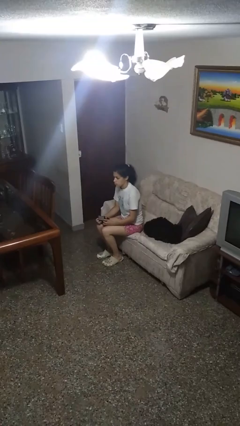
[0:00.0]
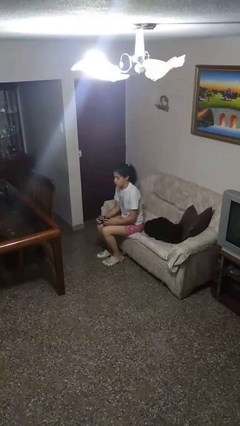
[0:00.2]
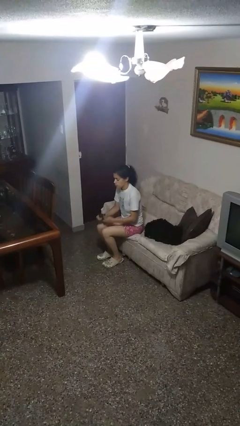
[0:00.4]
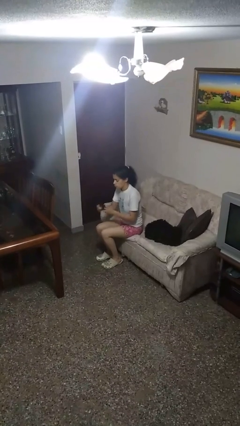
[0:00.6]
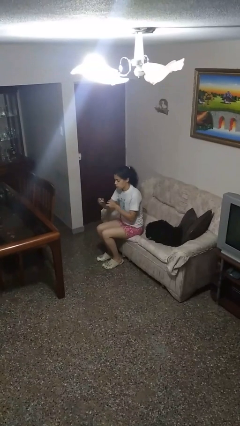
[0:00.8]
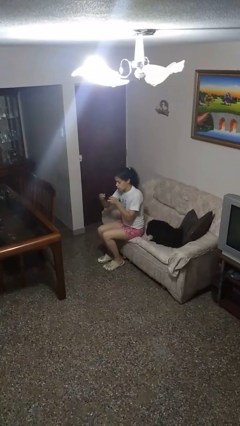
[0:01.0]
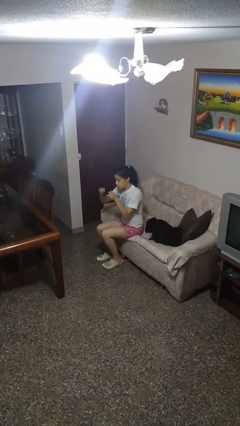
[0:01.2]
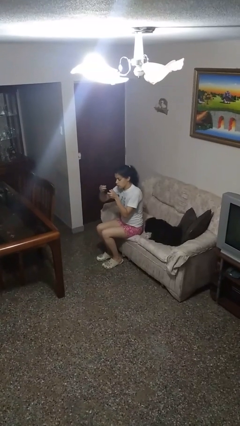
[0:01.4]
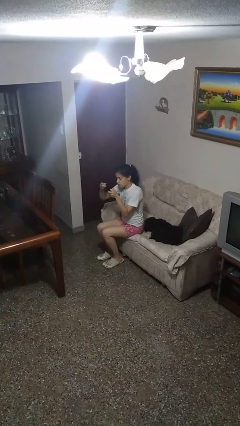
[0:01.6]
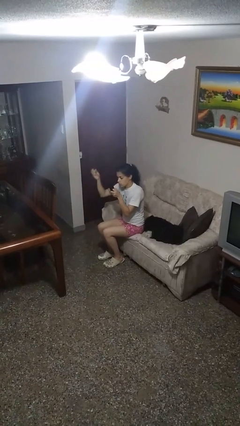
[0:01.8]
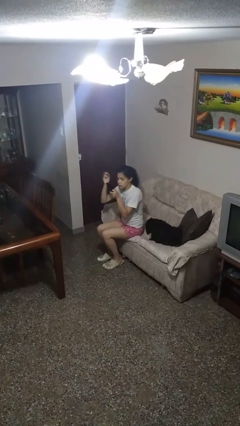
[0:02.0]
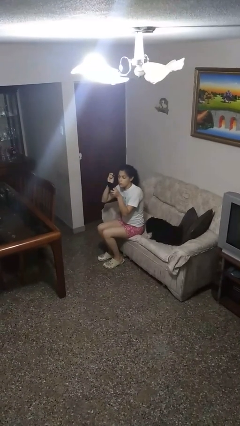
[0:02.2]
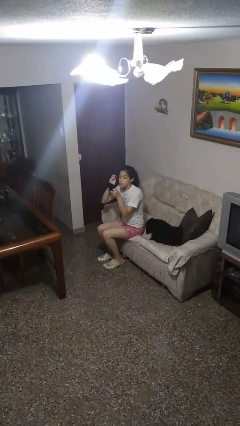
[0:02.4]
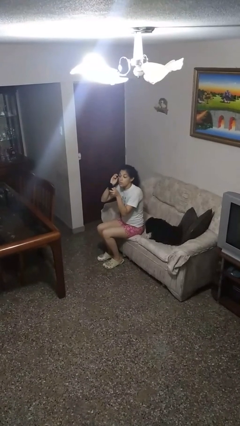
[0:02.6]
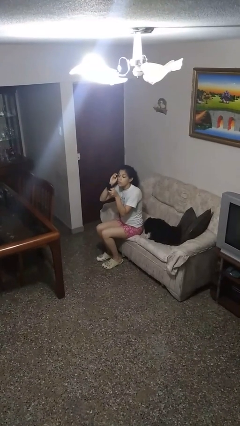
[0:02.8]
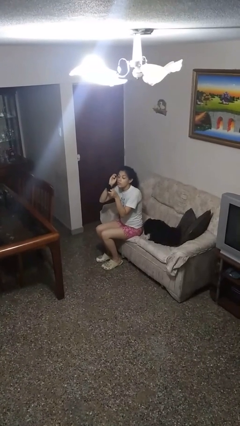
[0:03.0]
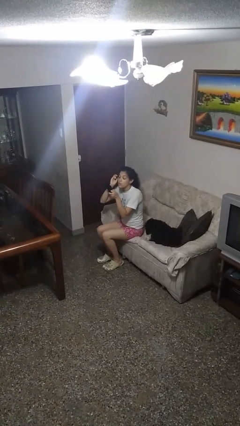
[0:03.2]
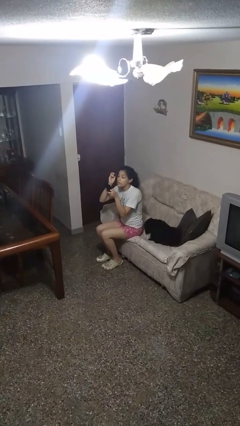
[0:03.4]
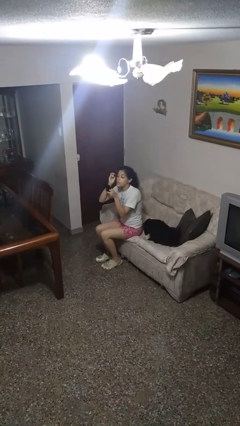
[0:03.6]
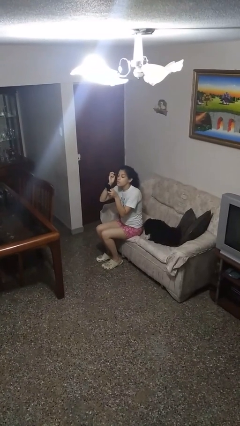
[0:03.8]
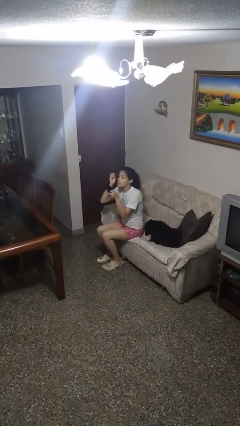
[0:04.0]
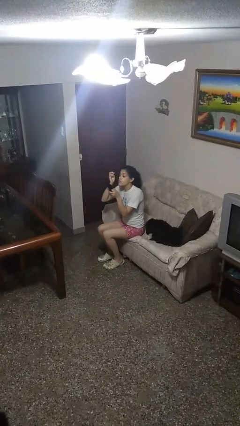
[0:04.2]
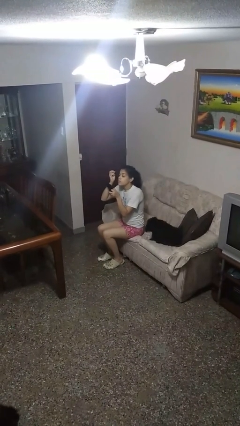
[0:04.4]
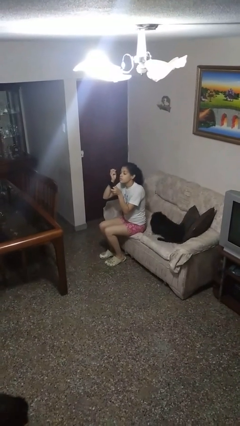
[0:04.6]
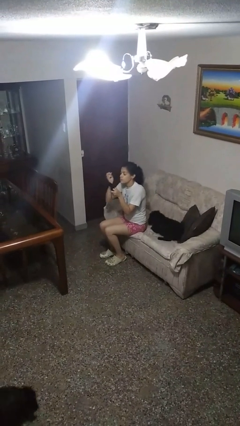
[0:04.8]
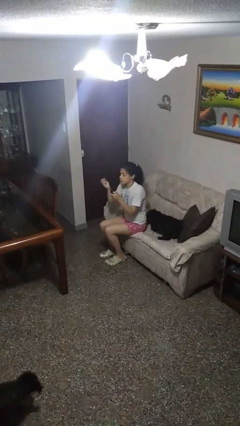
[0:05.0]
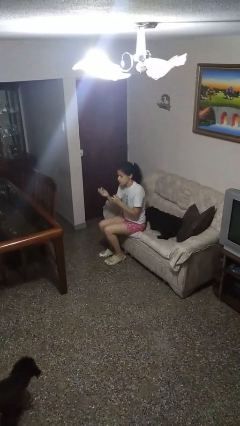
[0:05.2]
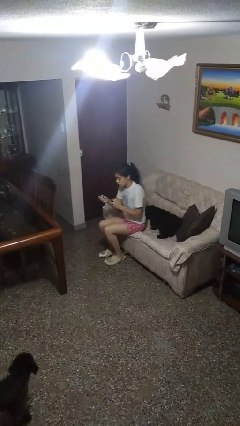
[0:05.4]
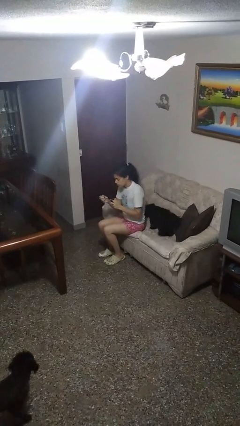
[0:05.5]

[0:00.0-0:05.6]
person applies eye makeup

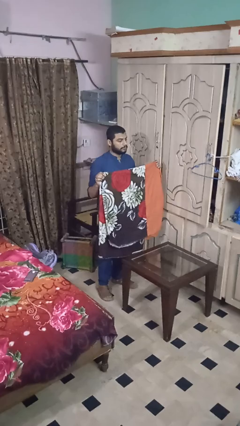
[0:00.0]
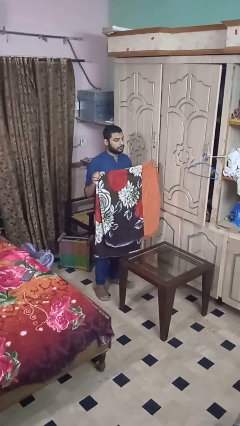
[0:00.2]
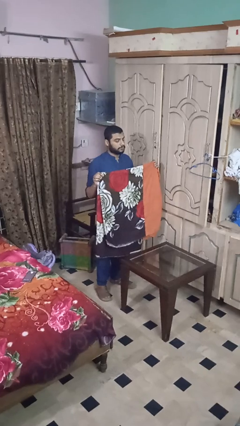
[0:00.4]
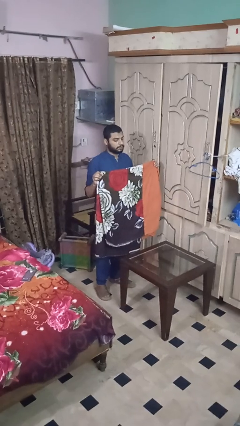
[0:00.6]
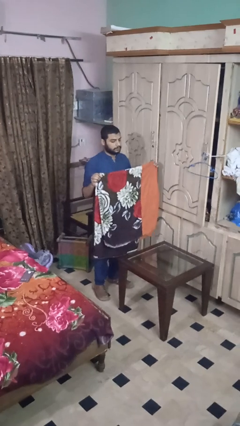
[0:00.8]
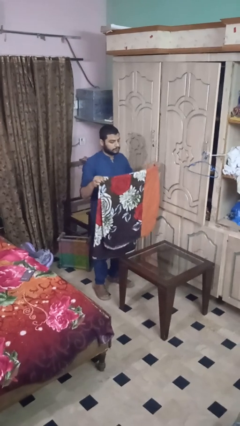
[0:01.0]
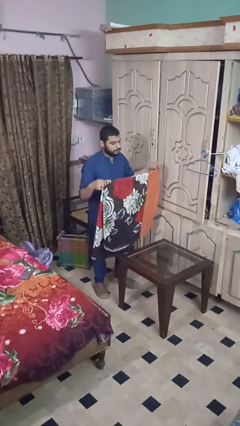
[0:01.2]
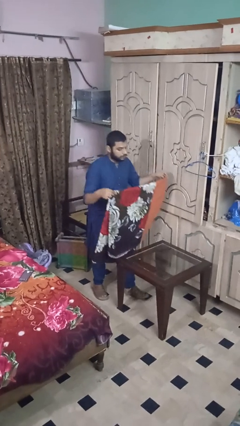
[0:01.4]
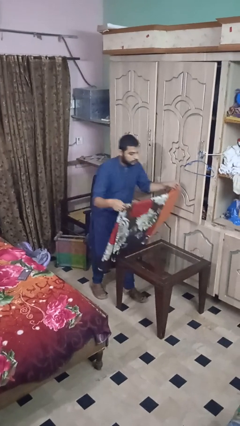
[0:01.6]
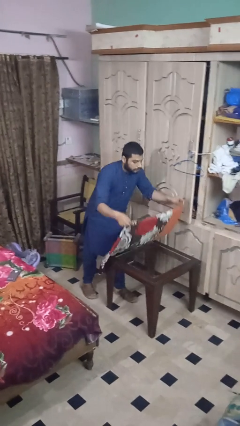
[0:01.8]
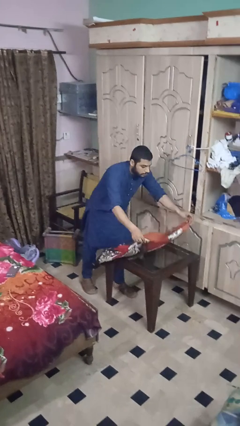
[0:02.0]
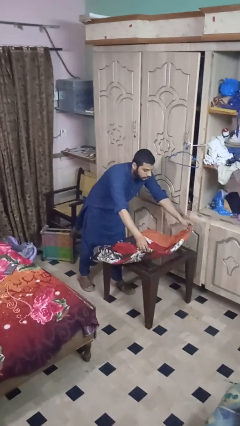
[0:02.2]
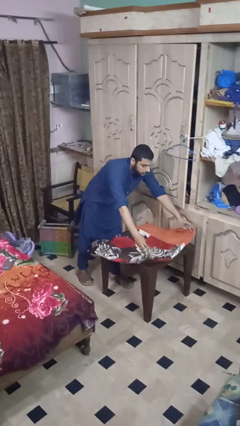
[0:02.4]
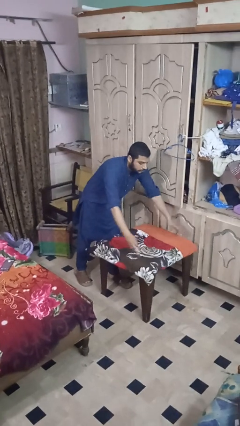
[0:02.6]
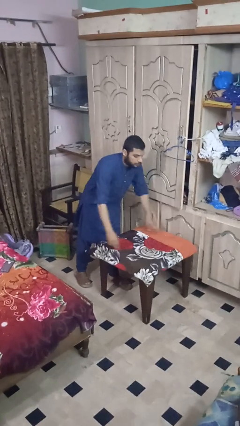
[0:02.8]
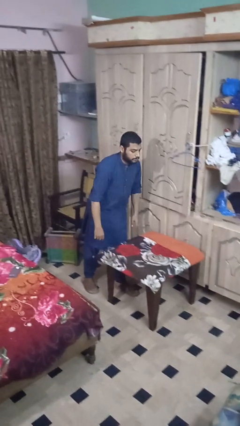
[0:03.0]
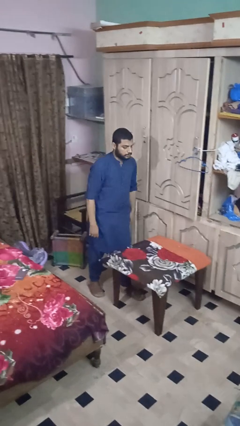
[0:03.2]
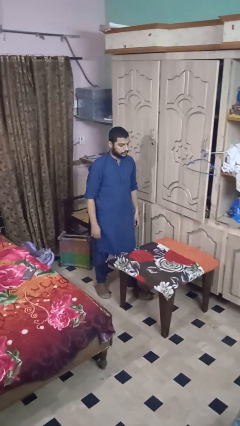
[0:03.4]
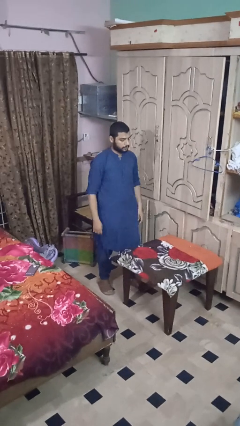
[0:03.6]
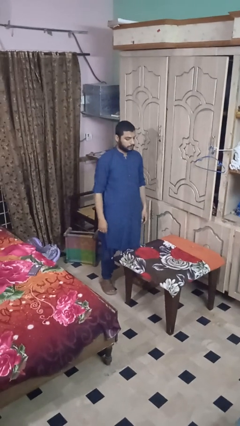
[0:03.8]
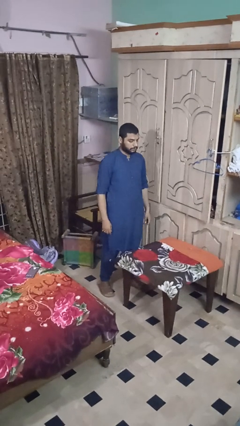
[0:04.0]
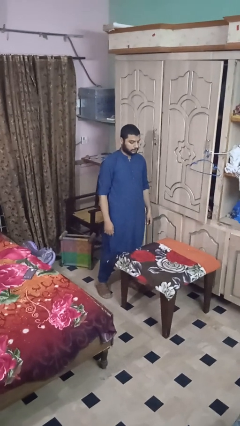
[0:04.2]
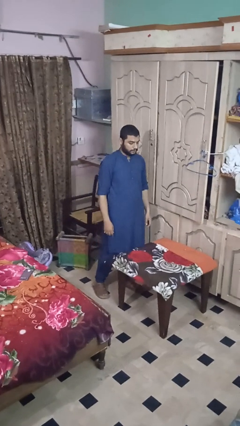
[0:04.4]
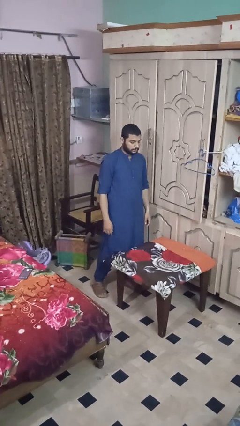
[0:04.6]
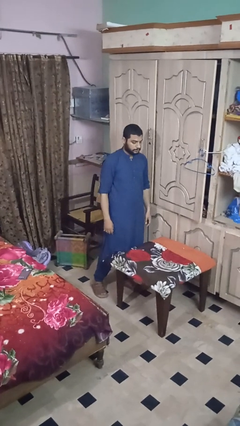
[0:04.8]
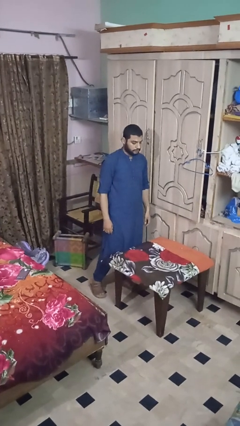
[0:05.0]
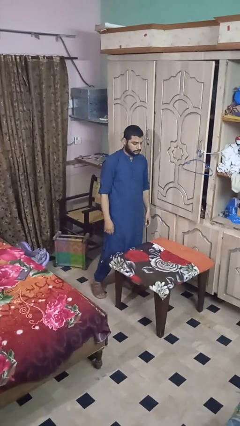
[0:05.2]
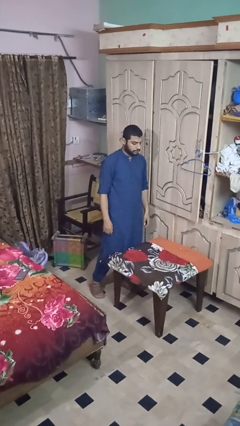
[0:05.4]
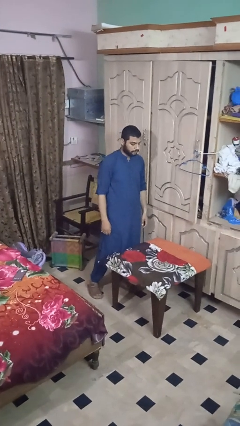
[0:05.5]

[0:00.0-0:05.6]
person spreads tablecloth

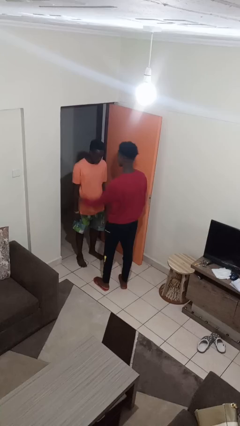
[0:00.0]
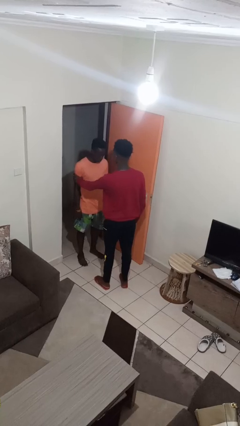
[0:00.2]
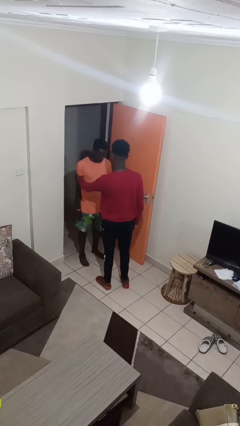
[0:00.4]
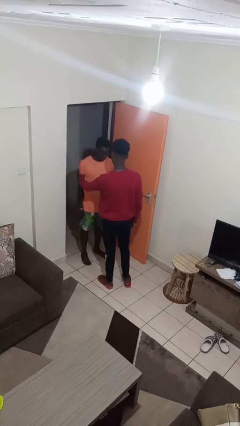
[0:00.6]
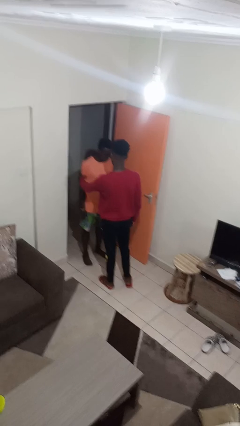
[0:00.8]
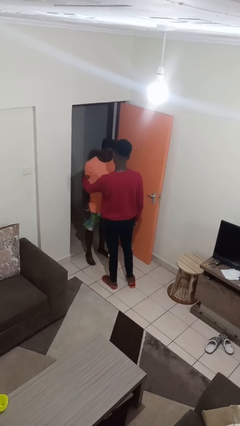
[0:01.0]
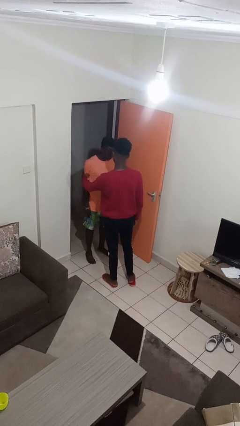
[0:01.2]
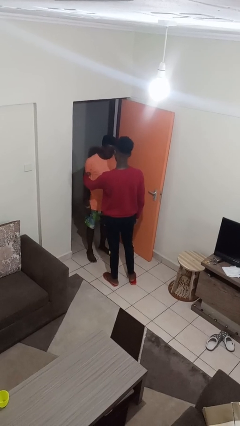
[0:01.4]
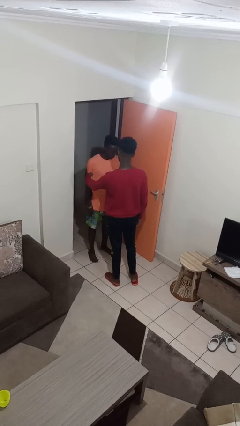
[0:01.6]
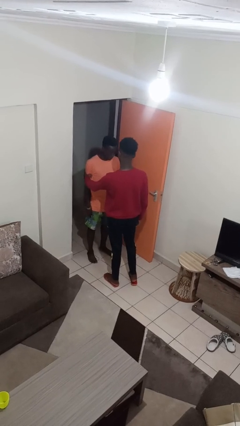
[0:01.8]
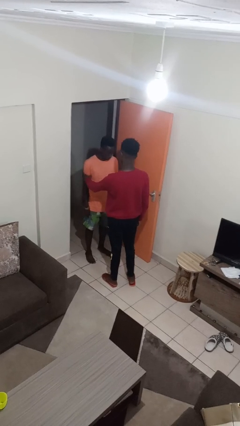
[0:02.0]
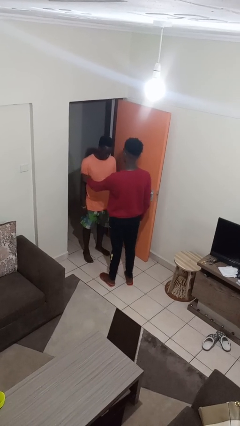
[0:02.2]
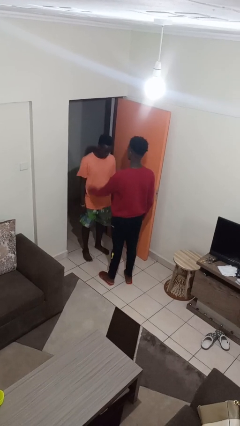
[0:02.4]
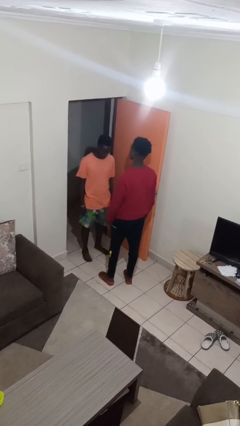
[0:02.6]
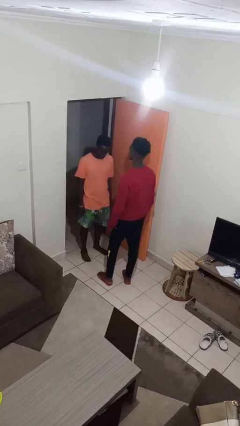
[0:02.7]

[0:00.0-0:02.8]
person grabs person by bicep

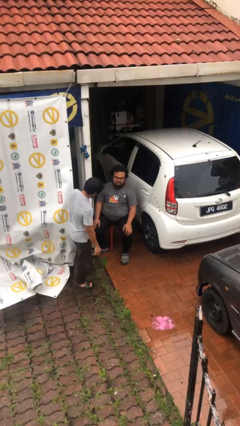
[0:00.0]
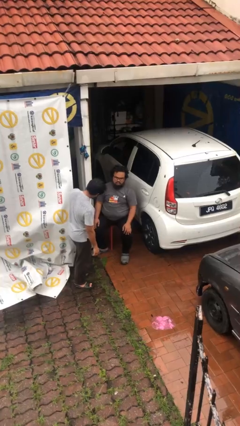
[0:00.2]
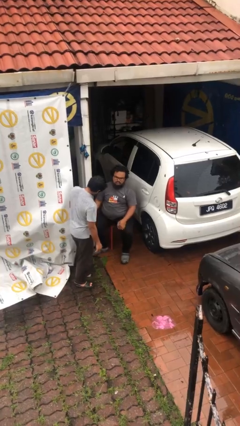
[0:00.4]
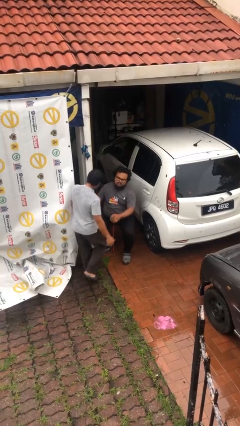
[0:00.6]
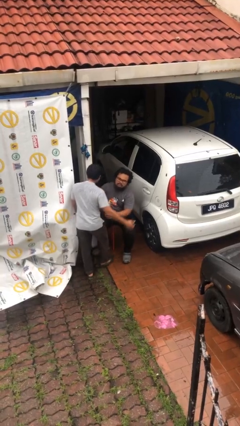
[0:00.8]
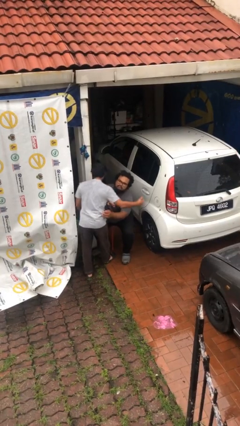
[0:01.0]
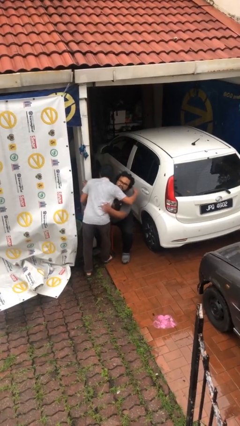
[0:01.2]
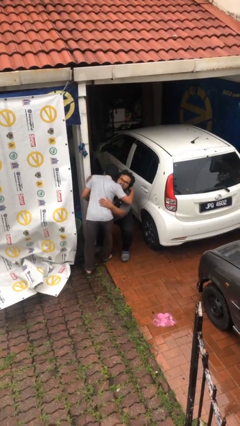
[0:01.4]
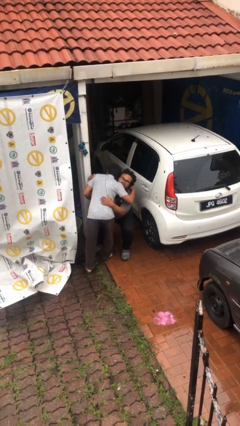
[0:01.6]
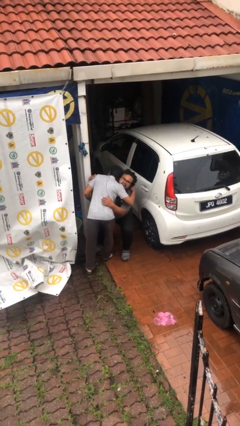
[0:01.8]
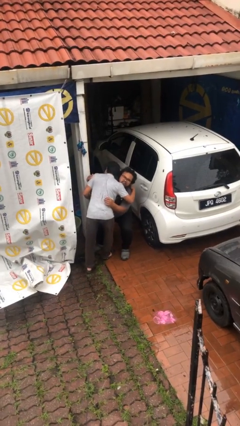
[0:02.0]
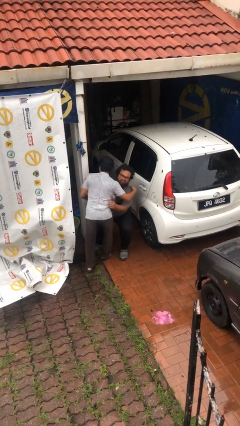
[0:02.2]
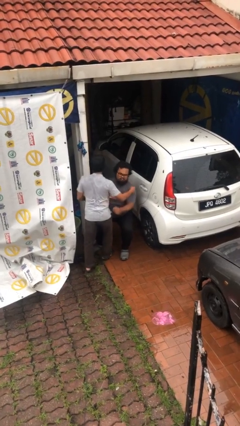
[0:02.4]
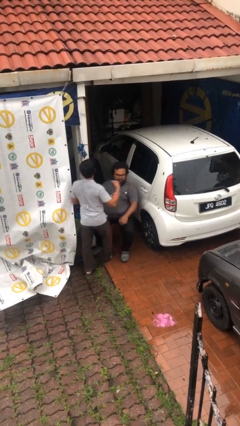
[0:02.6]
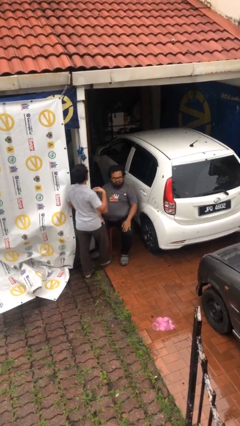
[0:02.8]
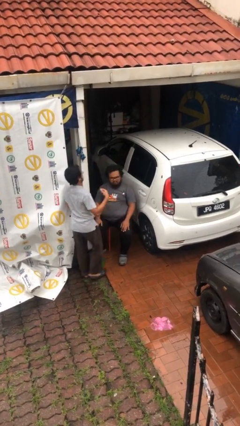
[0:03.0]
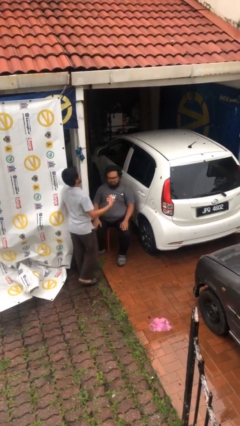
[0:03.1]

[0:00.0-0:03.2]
person embraces person

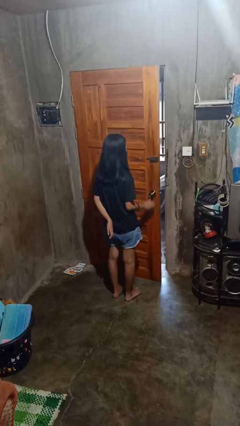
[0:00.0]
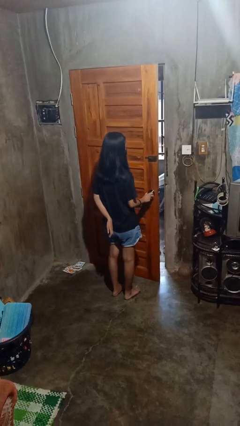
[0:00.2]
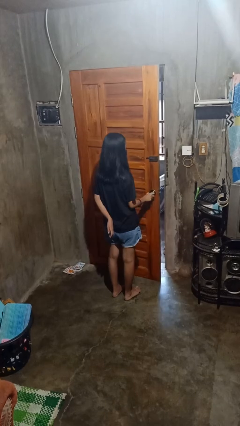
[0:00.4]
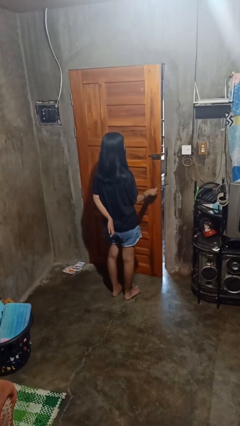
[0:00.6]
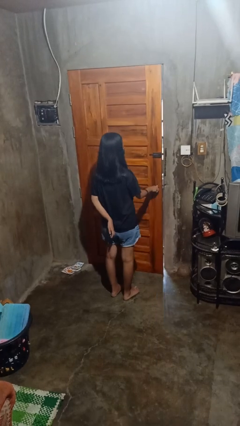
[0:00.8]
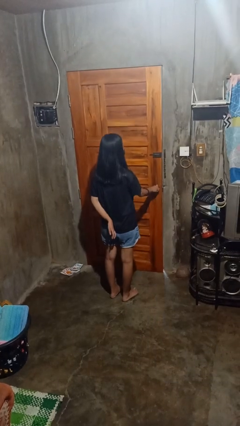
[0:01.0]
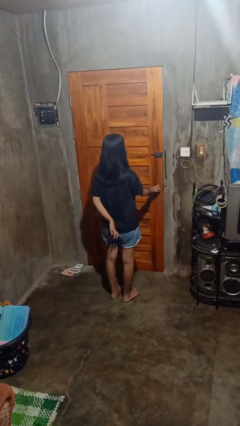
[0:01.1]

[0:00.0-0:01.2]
person closes facility door
